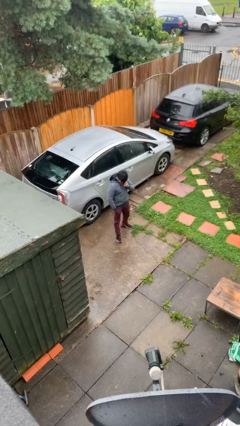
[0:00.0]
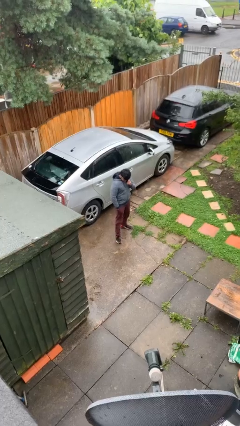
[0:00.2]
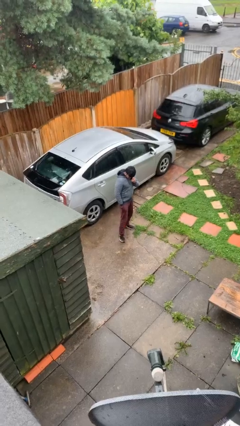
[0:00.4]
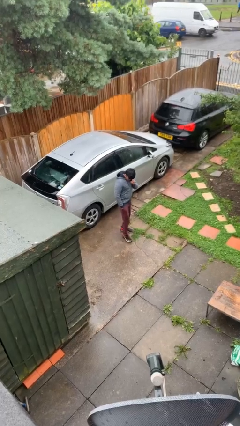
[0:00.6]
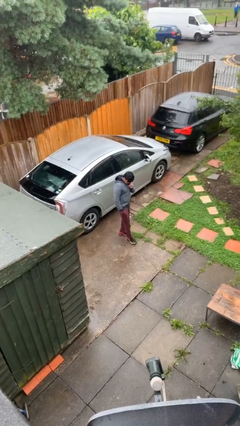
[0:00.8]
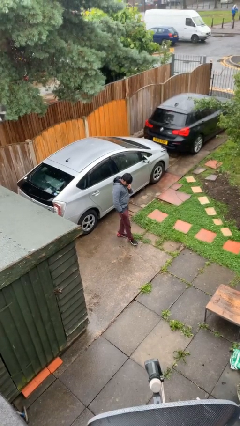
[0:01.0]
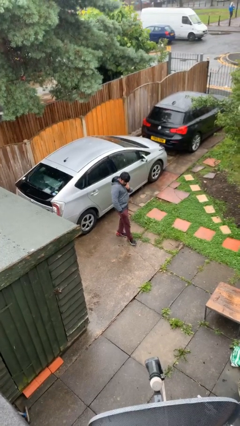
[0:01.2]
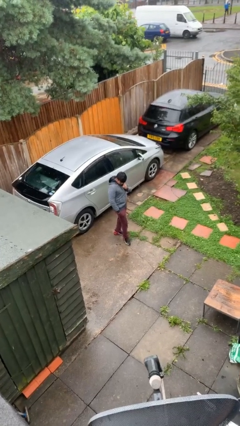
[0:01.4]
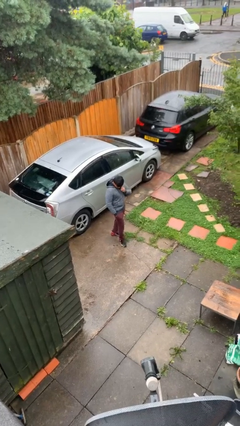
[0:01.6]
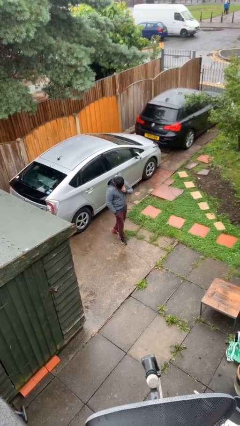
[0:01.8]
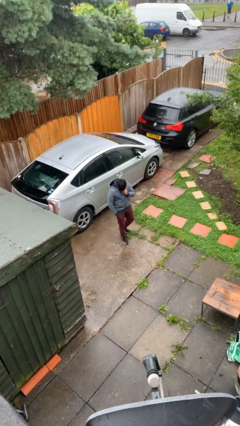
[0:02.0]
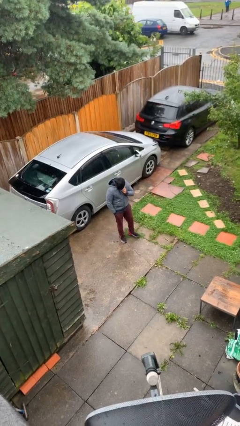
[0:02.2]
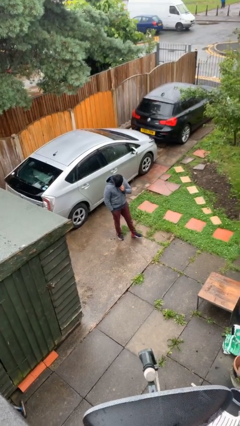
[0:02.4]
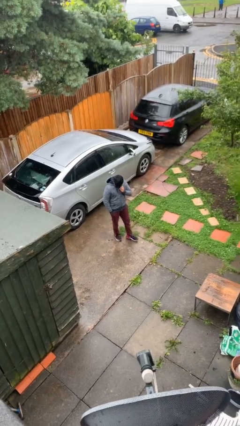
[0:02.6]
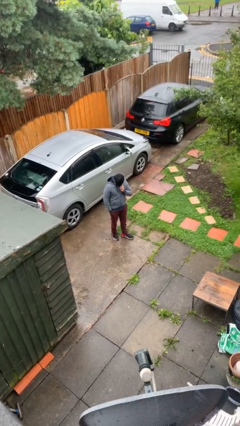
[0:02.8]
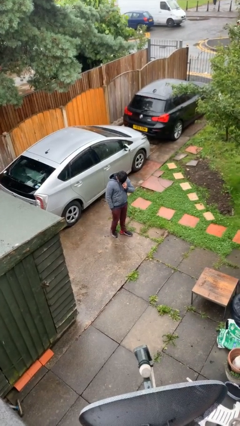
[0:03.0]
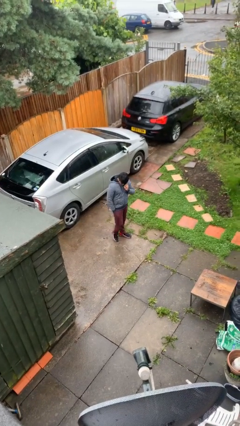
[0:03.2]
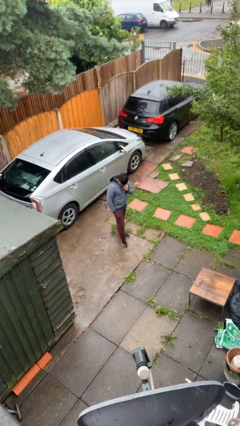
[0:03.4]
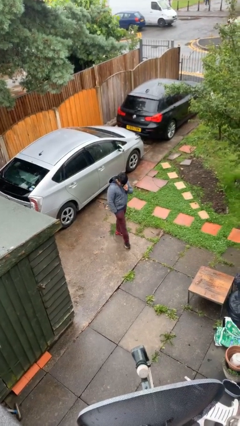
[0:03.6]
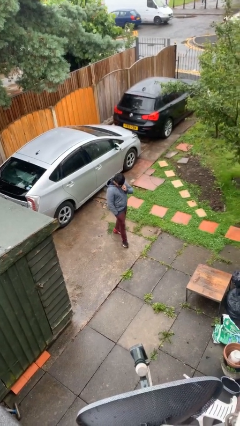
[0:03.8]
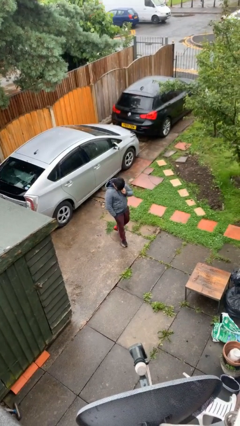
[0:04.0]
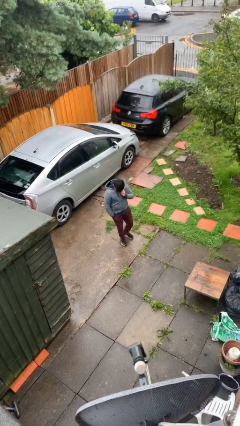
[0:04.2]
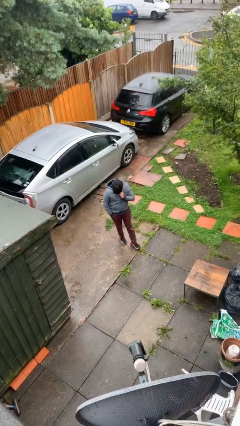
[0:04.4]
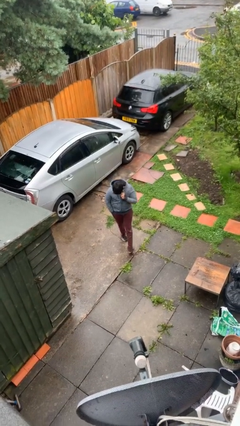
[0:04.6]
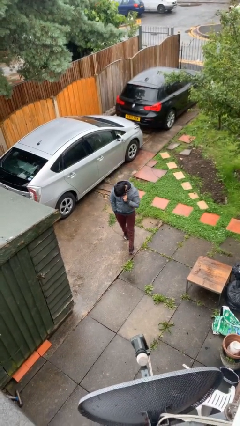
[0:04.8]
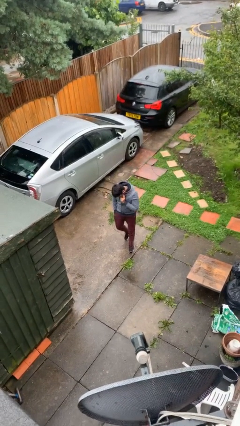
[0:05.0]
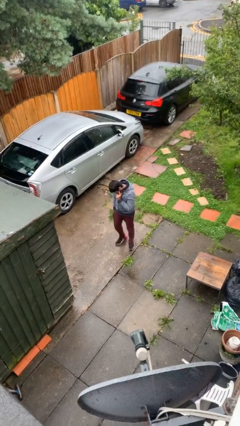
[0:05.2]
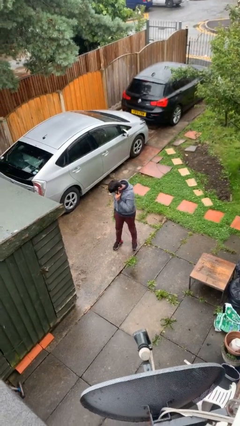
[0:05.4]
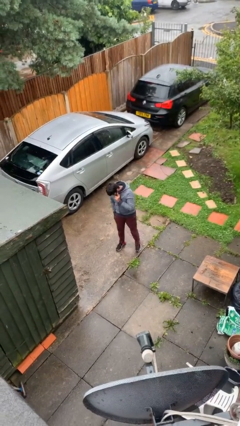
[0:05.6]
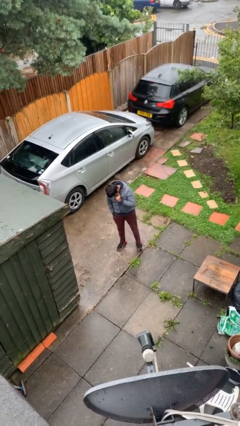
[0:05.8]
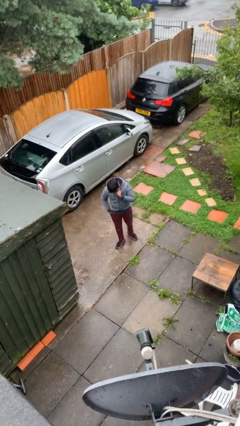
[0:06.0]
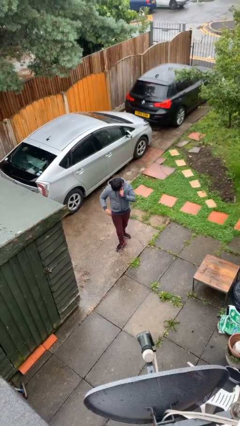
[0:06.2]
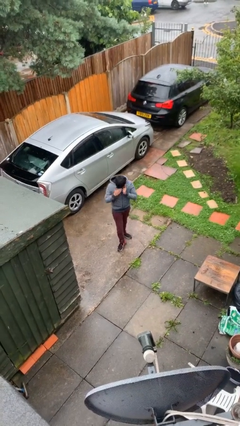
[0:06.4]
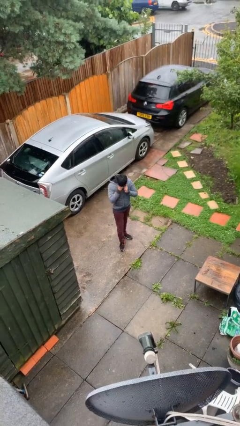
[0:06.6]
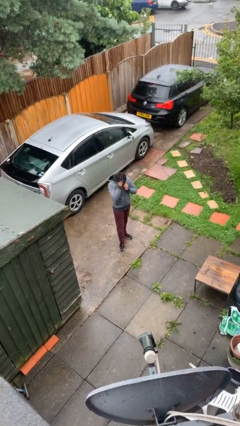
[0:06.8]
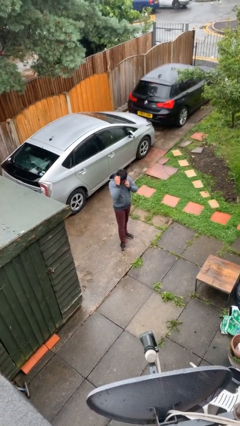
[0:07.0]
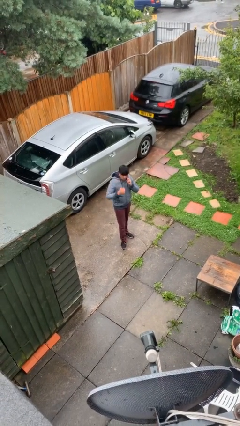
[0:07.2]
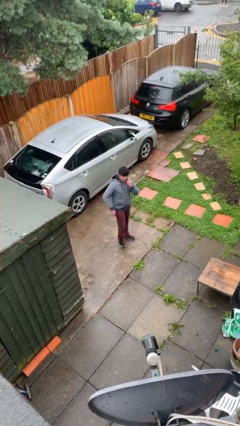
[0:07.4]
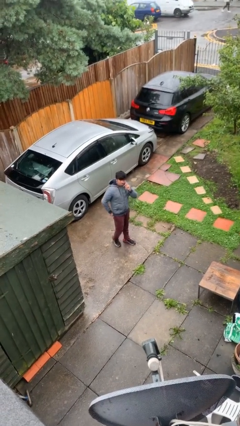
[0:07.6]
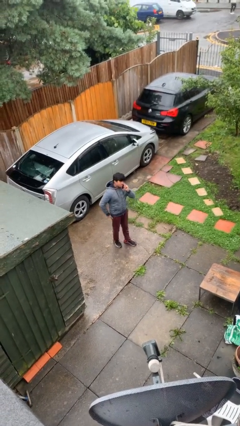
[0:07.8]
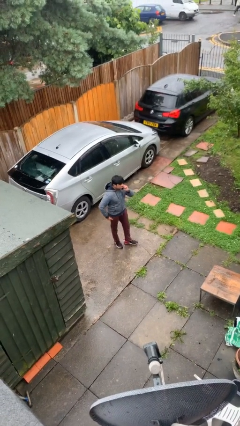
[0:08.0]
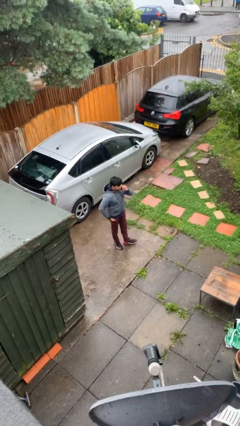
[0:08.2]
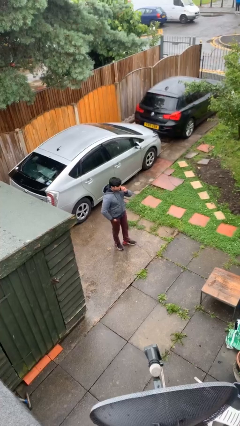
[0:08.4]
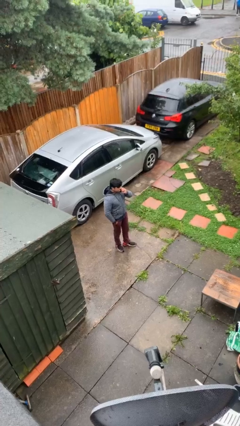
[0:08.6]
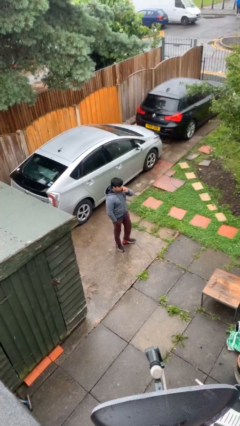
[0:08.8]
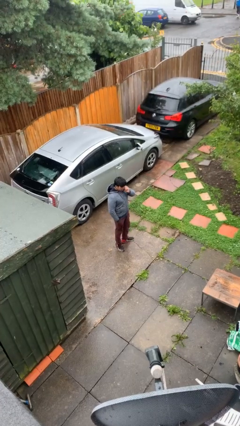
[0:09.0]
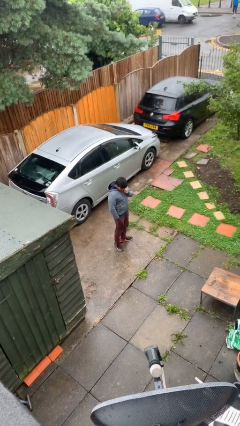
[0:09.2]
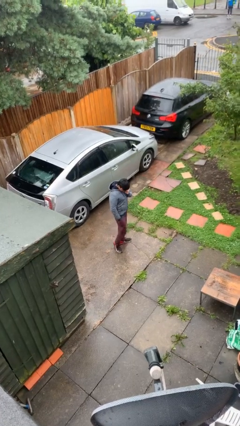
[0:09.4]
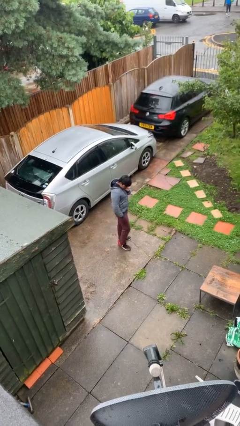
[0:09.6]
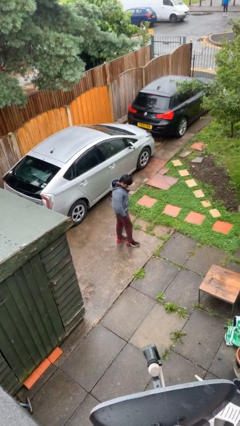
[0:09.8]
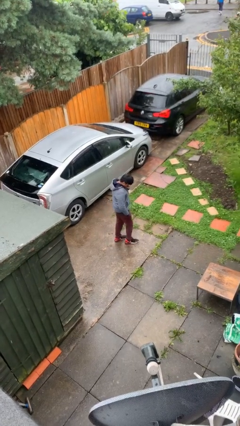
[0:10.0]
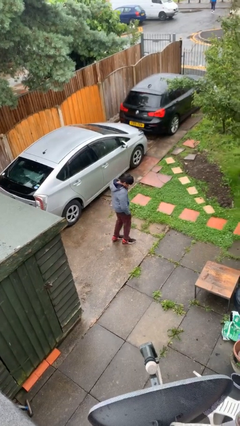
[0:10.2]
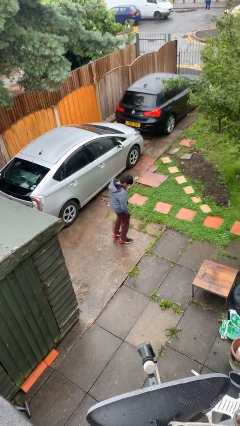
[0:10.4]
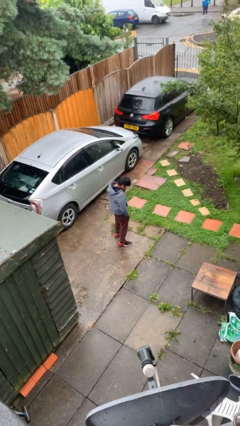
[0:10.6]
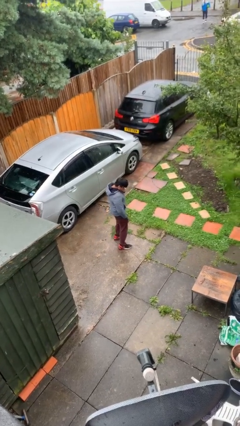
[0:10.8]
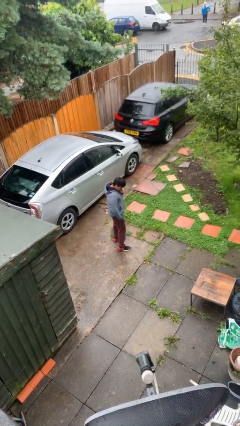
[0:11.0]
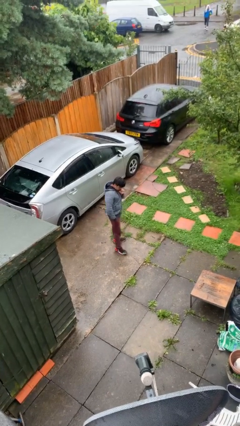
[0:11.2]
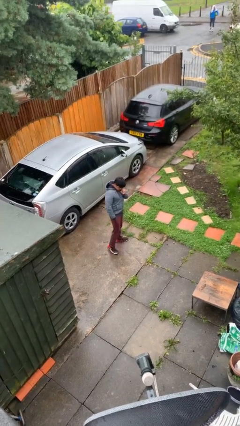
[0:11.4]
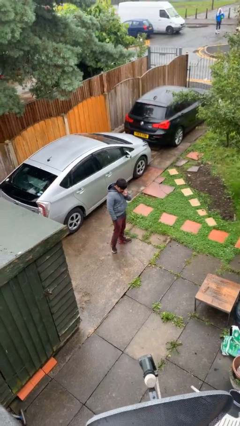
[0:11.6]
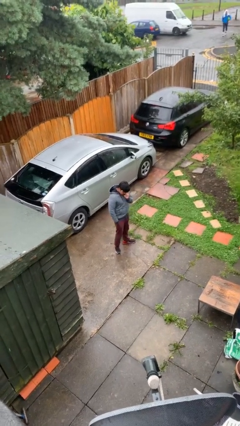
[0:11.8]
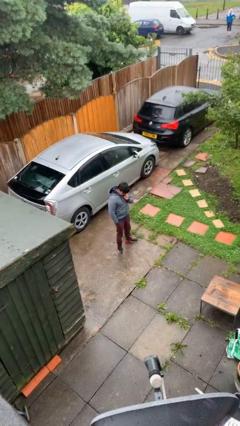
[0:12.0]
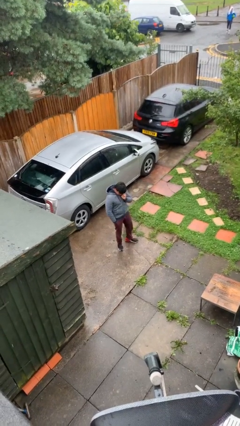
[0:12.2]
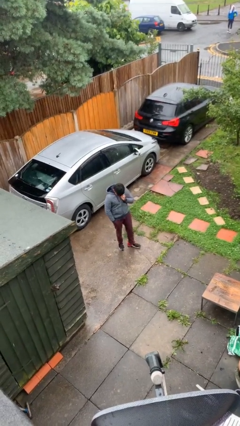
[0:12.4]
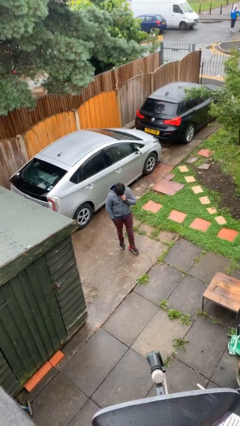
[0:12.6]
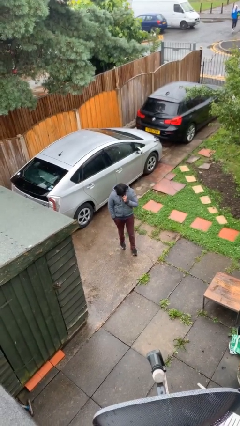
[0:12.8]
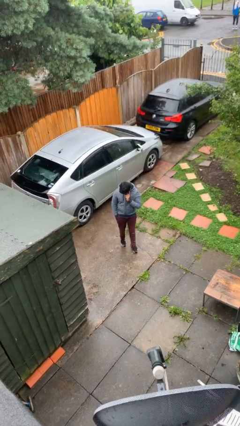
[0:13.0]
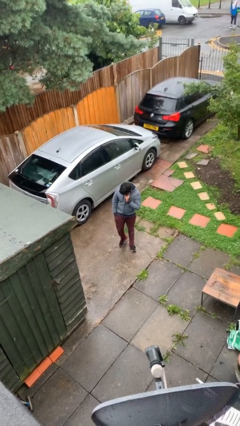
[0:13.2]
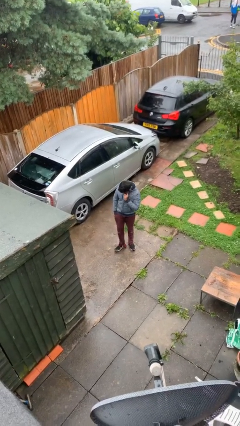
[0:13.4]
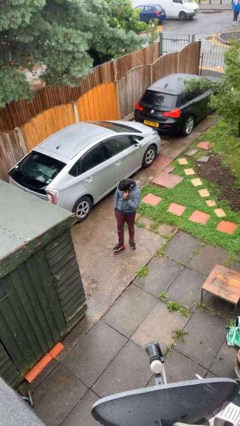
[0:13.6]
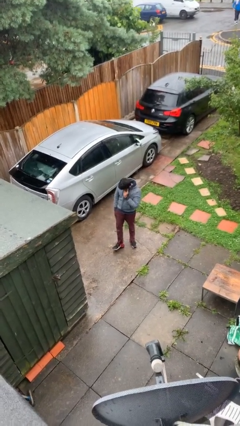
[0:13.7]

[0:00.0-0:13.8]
person talks on phone

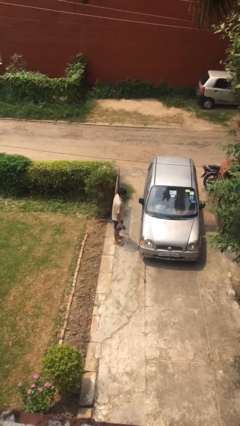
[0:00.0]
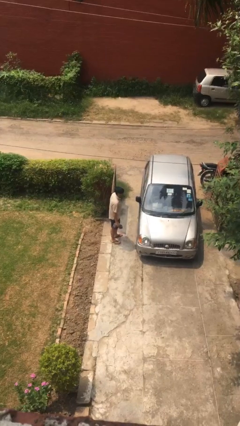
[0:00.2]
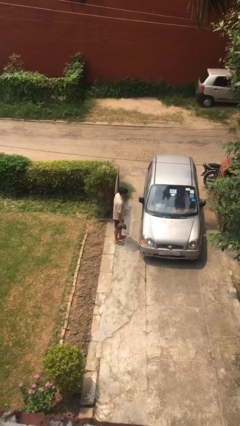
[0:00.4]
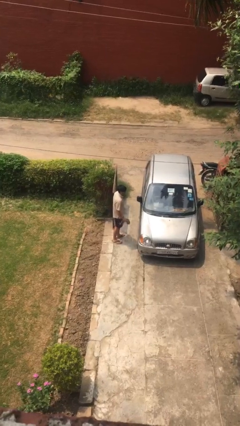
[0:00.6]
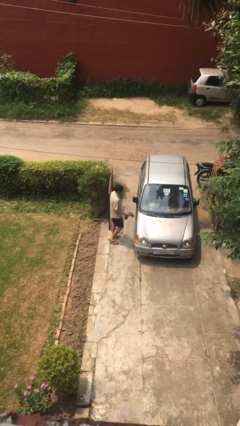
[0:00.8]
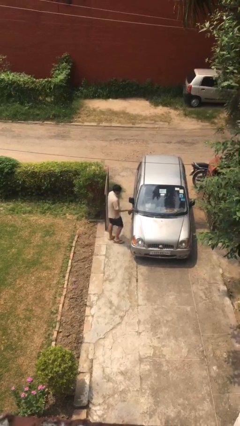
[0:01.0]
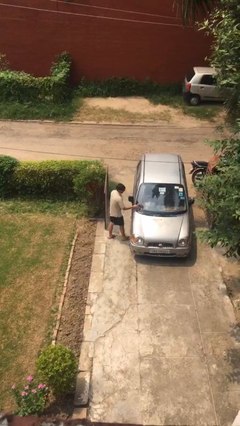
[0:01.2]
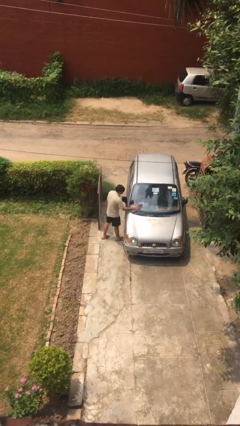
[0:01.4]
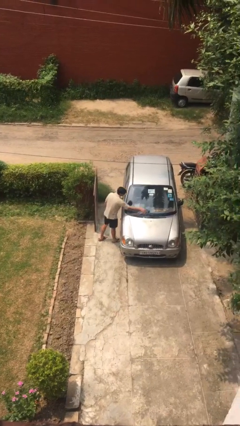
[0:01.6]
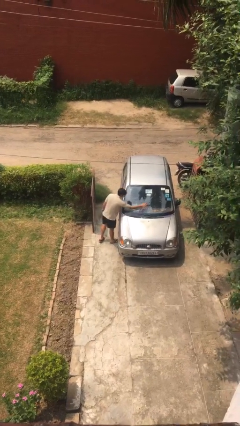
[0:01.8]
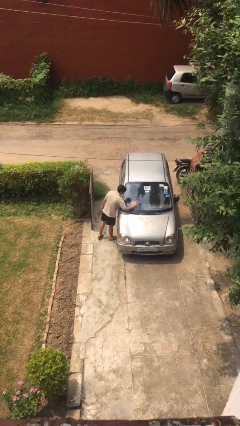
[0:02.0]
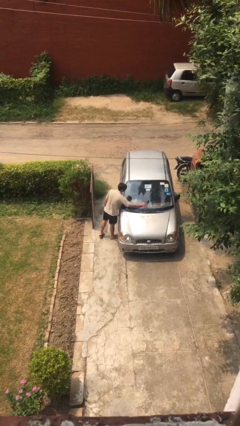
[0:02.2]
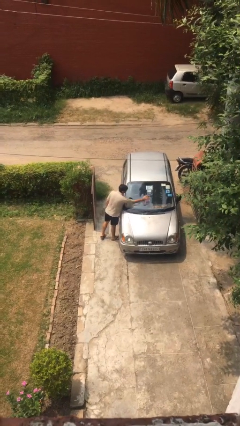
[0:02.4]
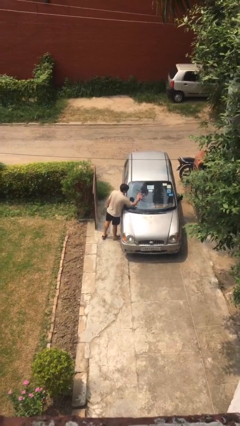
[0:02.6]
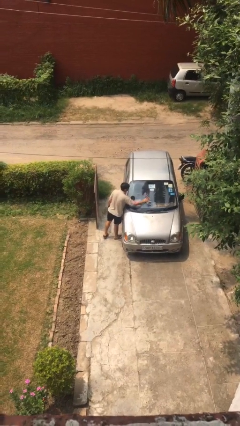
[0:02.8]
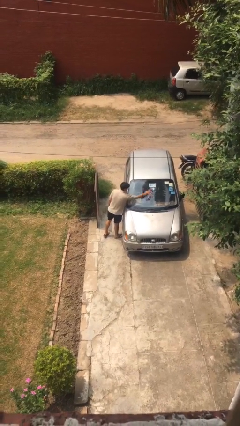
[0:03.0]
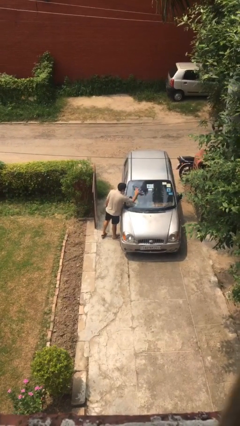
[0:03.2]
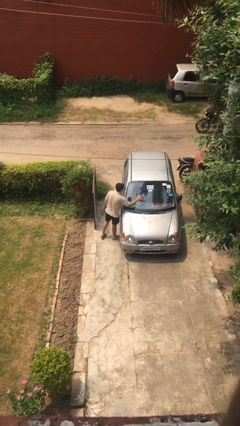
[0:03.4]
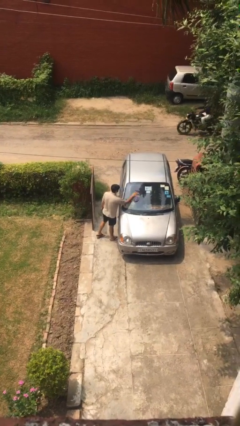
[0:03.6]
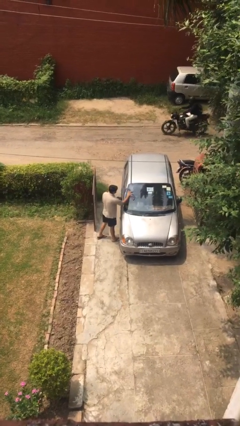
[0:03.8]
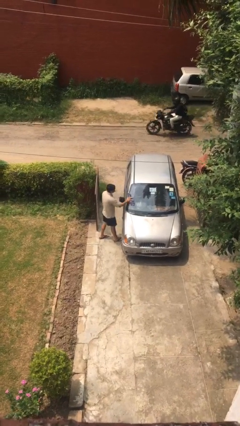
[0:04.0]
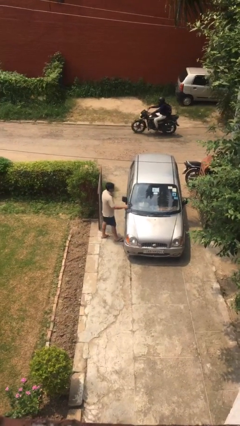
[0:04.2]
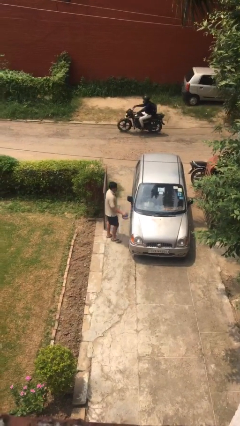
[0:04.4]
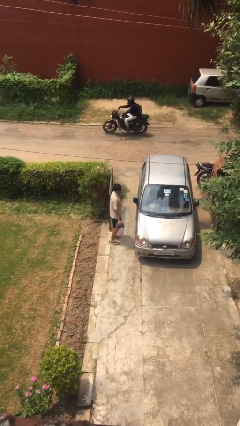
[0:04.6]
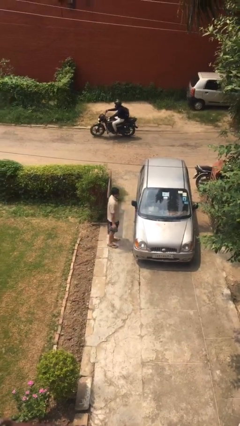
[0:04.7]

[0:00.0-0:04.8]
person polishes car with rag

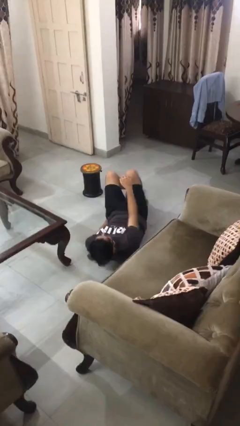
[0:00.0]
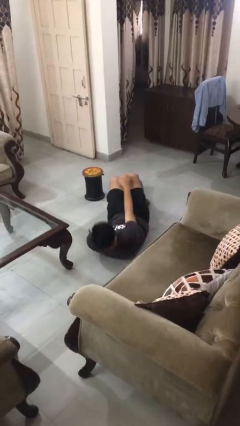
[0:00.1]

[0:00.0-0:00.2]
person stands up from floor
